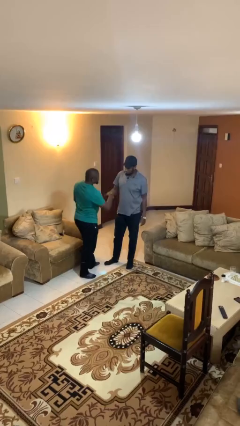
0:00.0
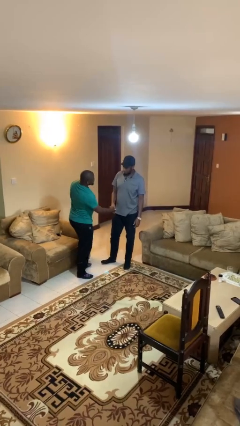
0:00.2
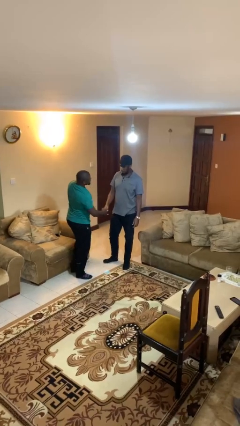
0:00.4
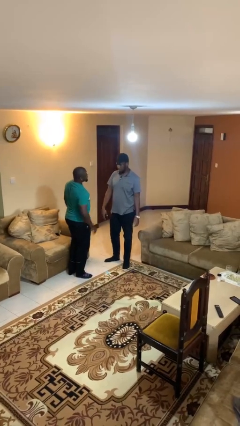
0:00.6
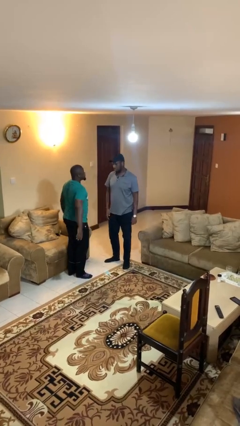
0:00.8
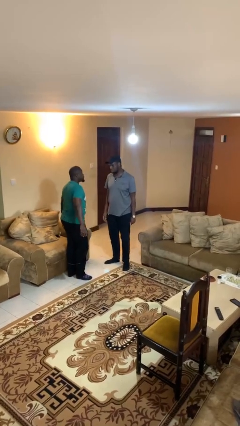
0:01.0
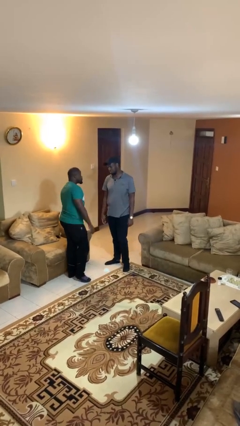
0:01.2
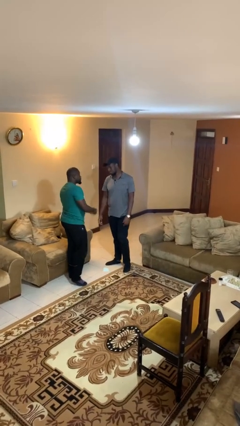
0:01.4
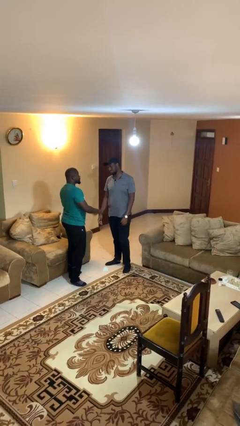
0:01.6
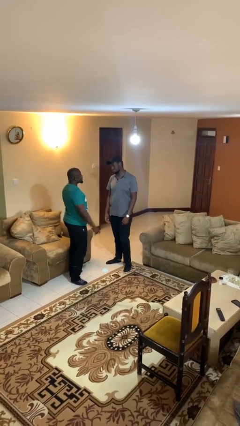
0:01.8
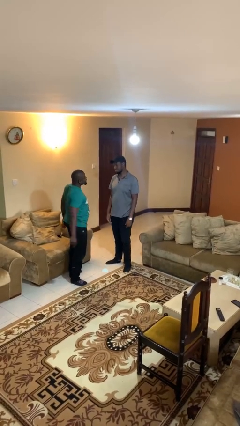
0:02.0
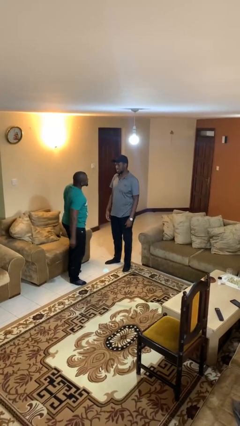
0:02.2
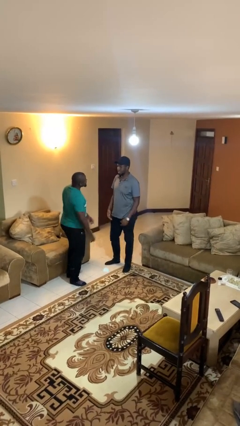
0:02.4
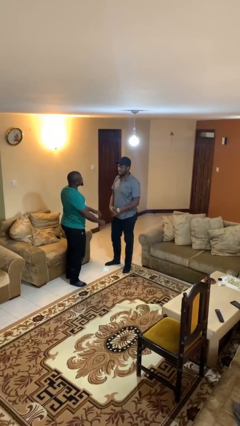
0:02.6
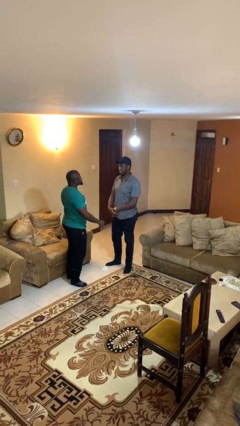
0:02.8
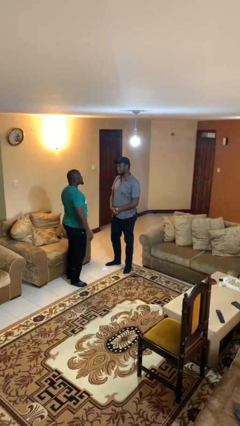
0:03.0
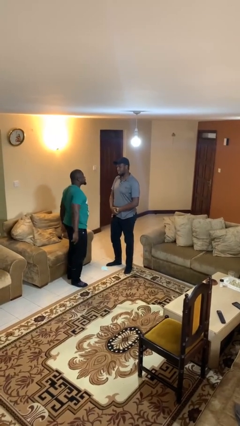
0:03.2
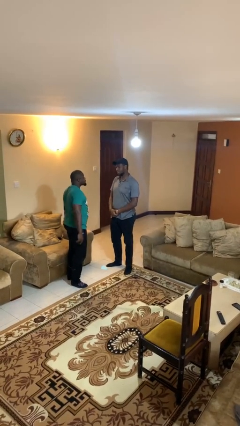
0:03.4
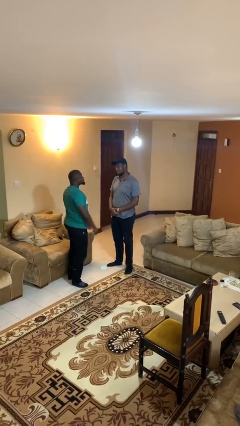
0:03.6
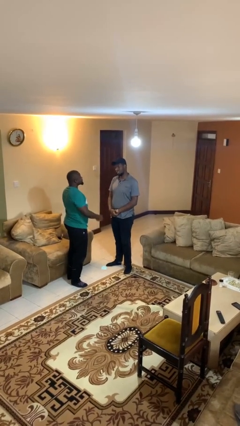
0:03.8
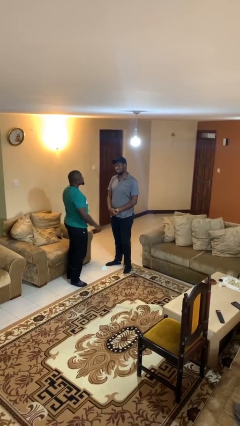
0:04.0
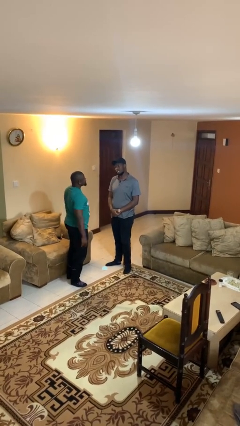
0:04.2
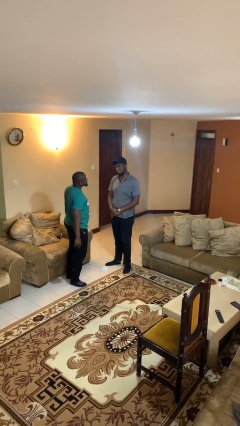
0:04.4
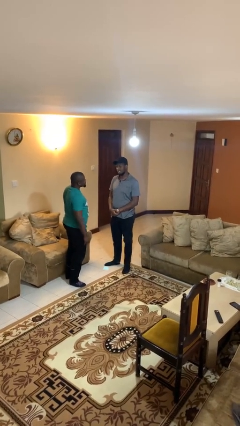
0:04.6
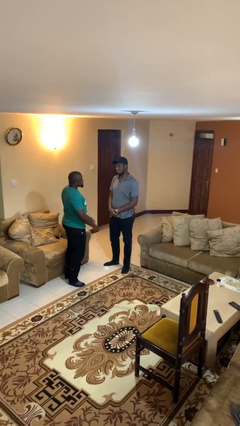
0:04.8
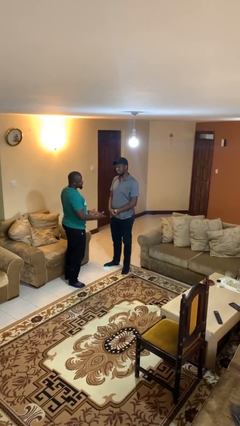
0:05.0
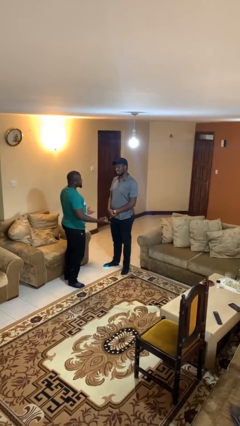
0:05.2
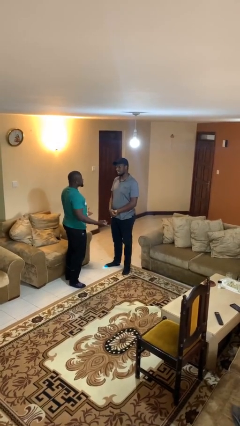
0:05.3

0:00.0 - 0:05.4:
person talks to person

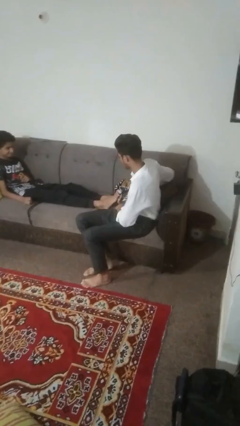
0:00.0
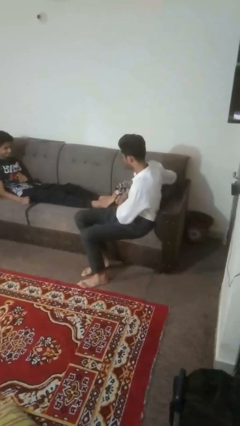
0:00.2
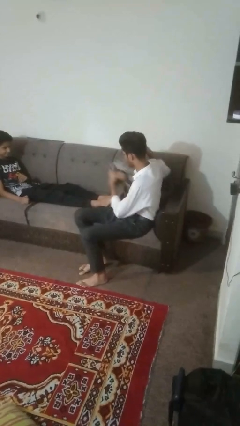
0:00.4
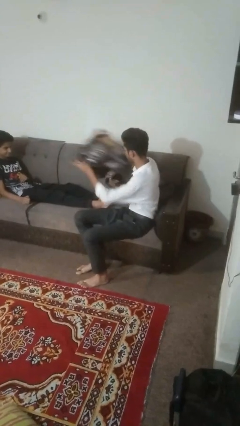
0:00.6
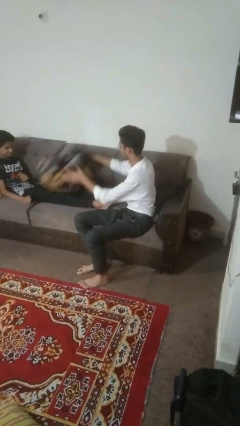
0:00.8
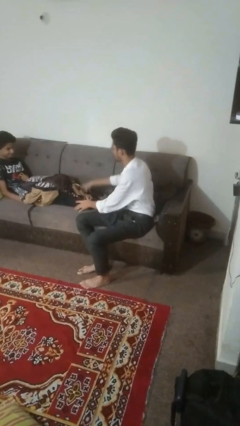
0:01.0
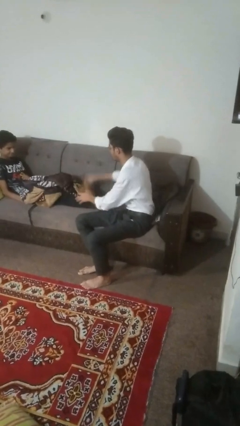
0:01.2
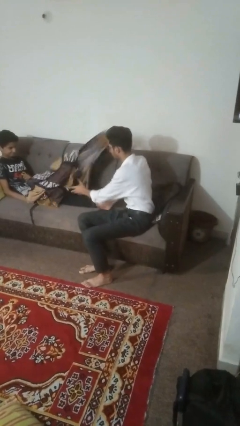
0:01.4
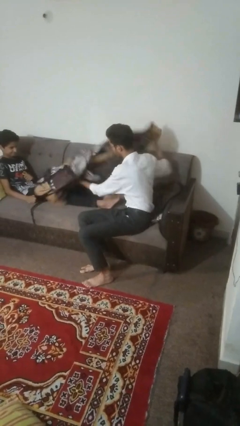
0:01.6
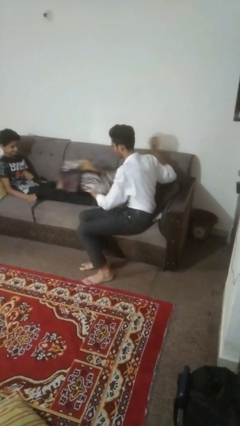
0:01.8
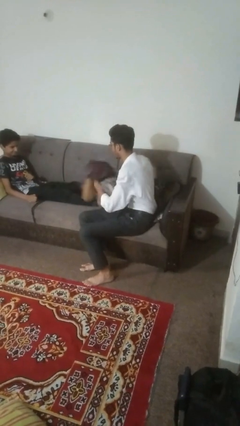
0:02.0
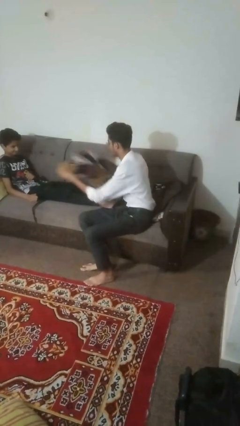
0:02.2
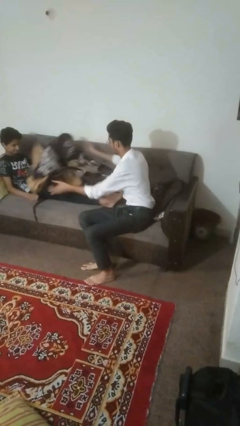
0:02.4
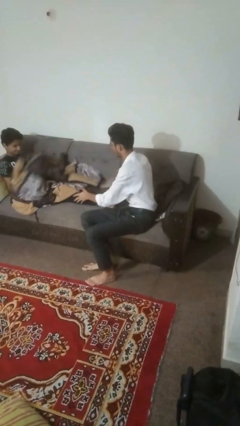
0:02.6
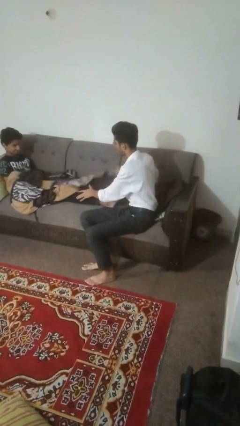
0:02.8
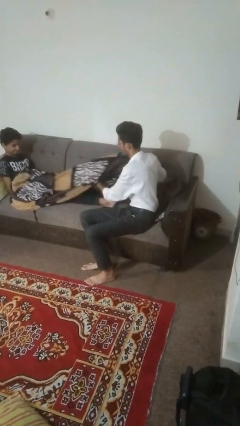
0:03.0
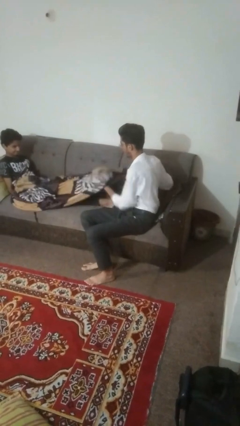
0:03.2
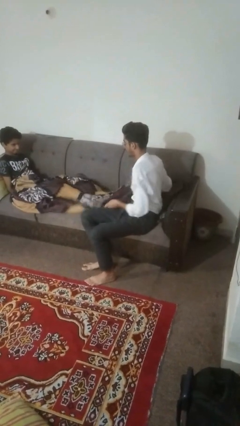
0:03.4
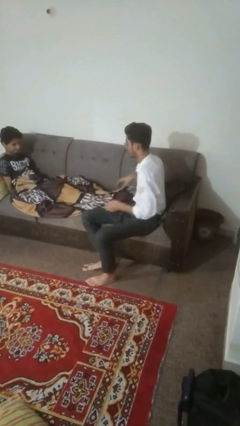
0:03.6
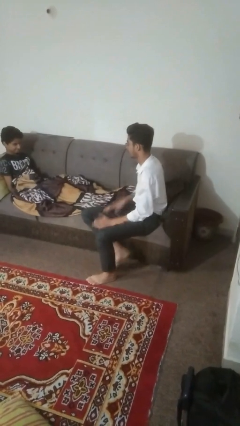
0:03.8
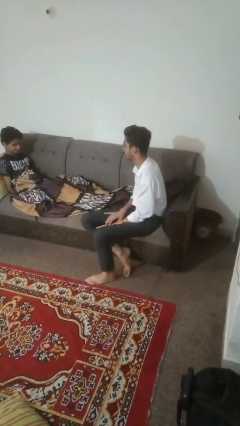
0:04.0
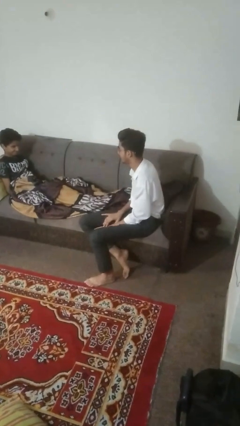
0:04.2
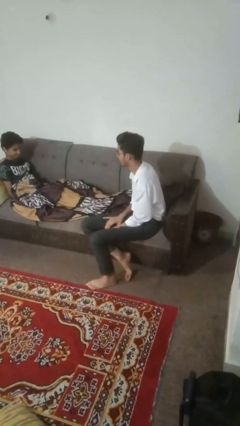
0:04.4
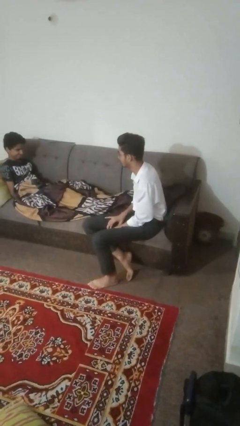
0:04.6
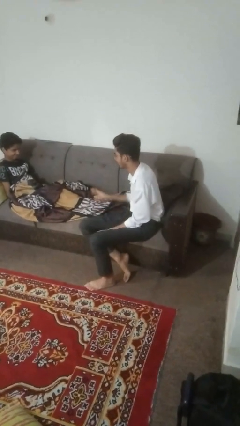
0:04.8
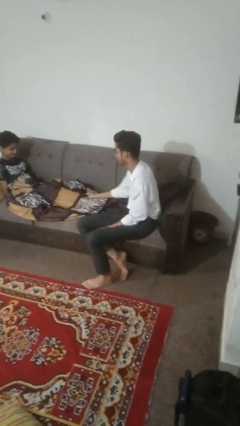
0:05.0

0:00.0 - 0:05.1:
person covers friend with blanket

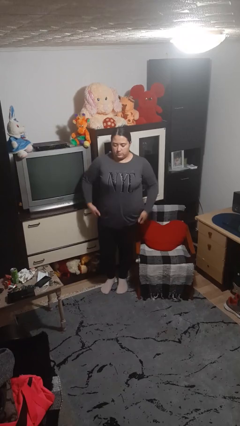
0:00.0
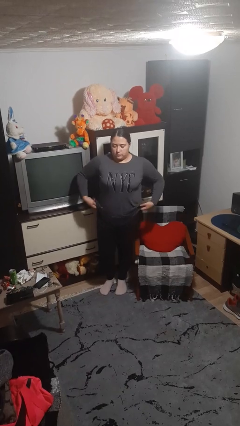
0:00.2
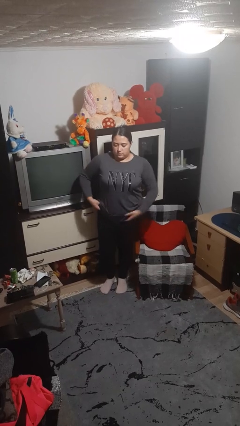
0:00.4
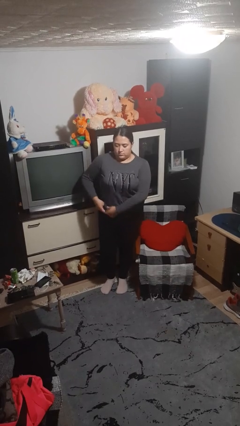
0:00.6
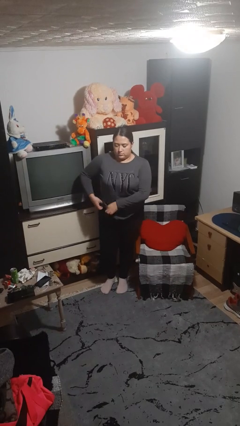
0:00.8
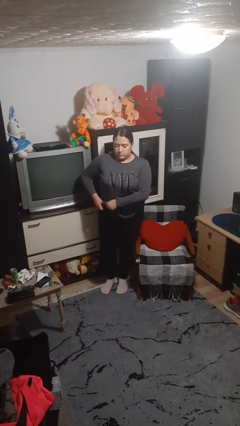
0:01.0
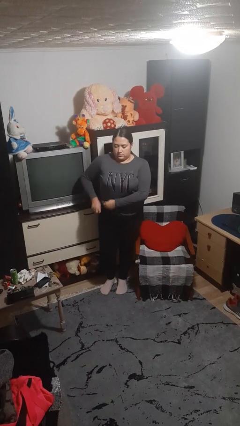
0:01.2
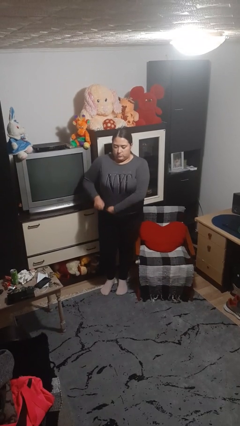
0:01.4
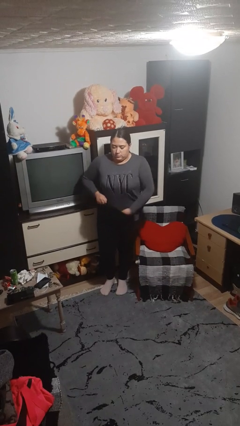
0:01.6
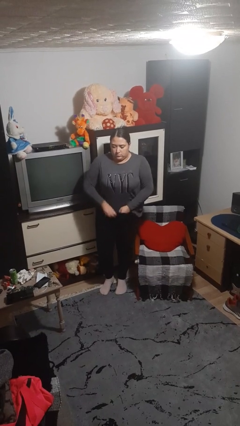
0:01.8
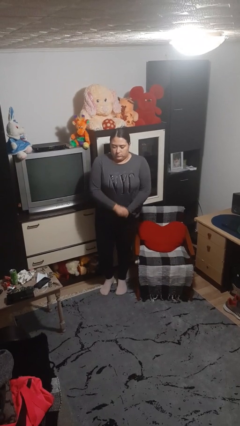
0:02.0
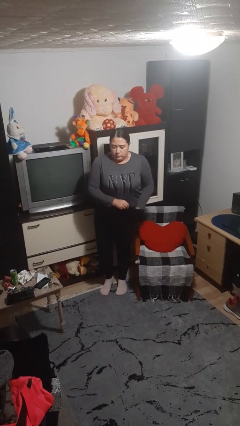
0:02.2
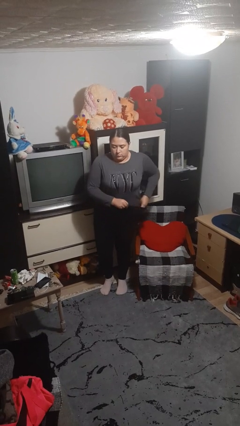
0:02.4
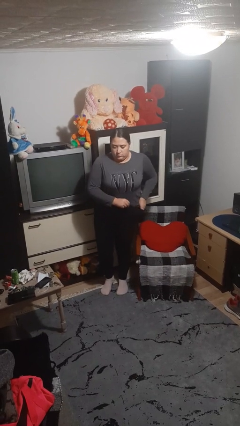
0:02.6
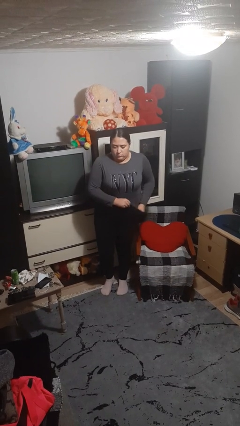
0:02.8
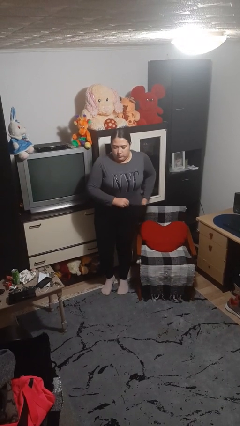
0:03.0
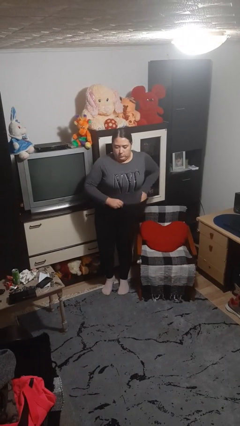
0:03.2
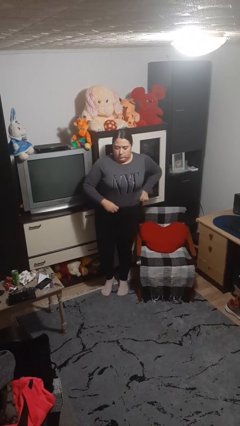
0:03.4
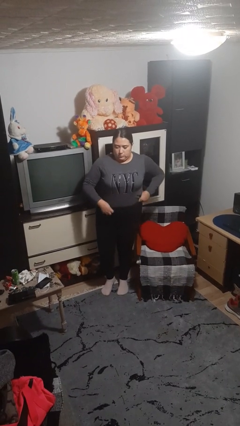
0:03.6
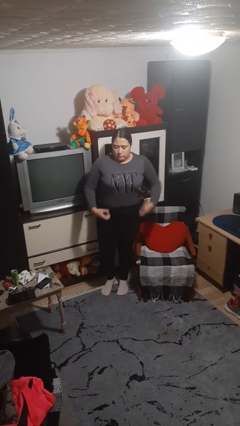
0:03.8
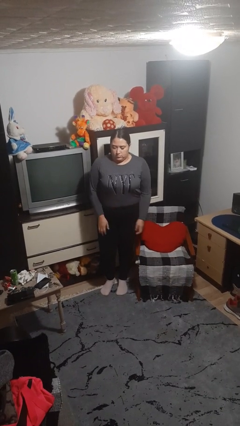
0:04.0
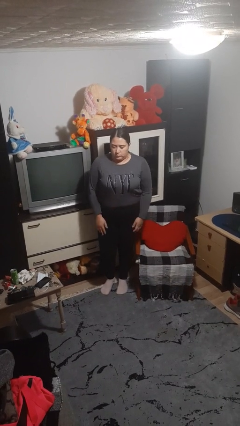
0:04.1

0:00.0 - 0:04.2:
person tucks in shirt

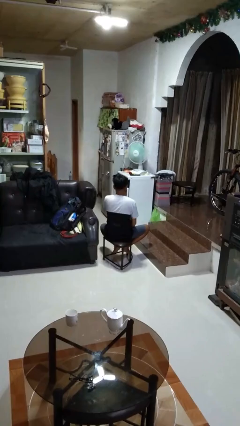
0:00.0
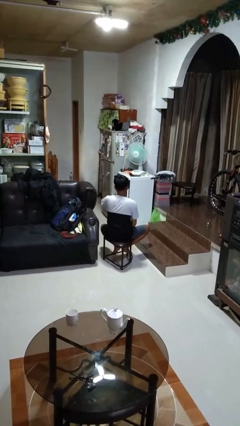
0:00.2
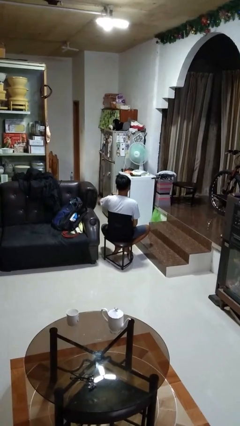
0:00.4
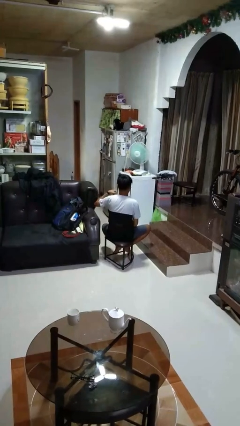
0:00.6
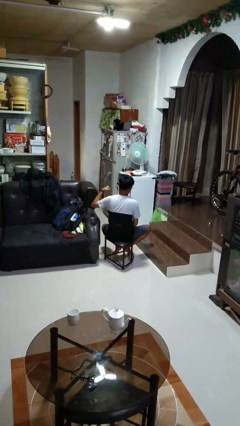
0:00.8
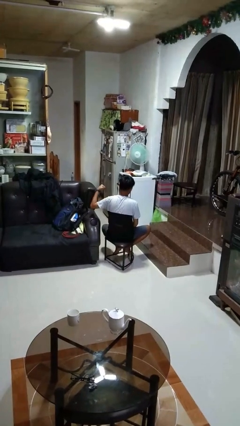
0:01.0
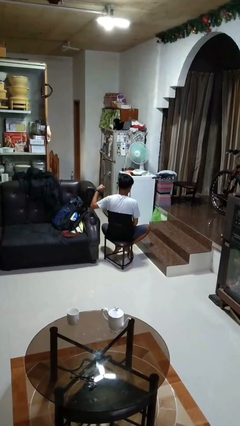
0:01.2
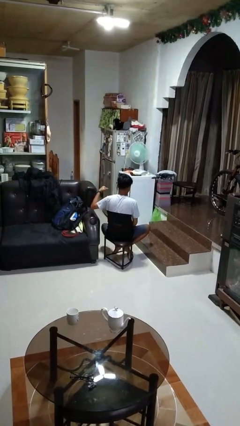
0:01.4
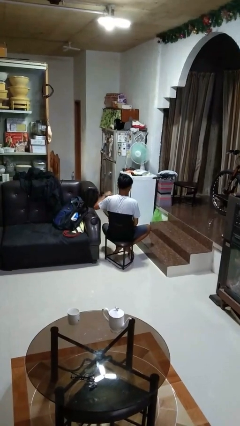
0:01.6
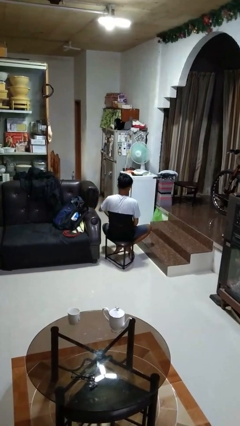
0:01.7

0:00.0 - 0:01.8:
person gestures cut

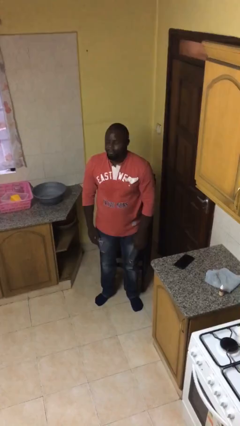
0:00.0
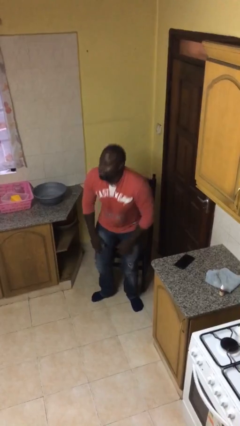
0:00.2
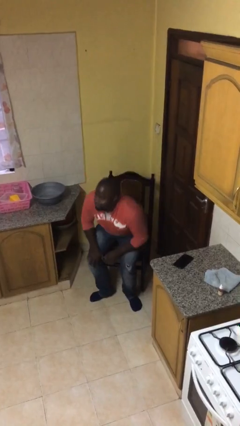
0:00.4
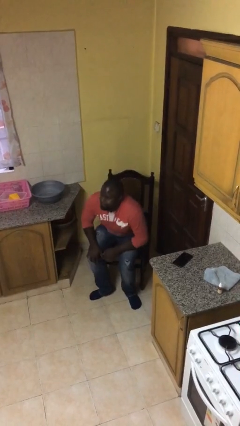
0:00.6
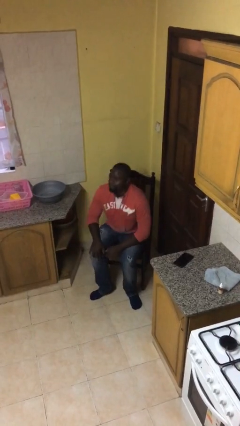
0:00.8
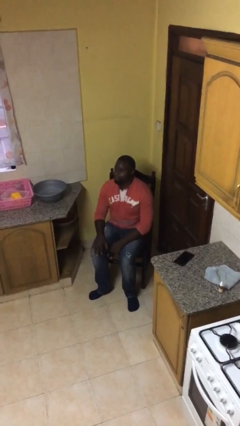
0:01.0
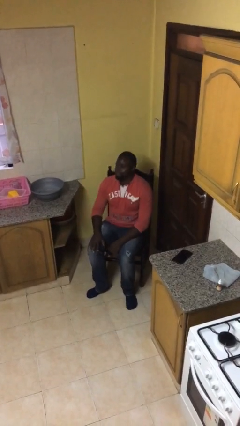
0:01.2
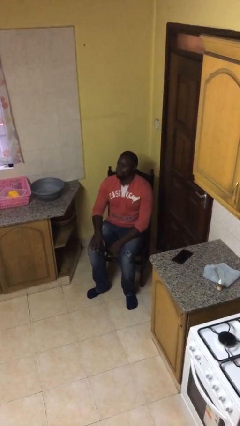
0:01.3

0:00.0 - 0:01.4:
person sits down
